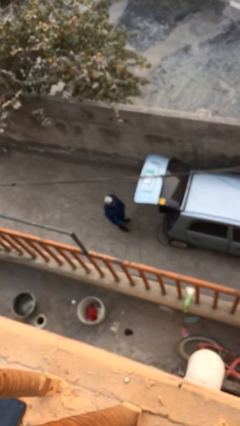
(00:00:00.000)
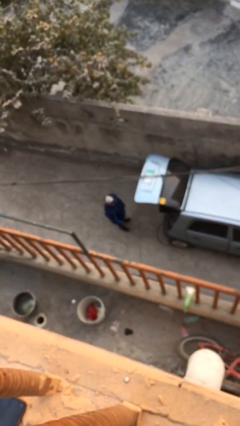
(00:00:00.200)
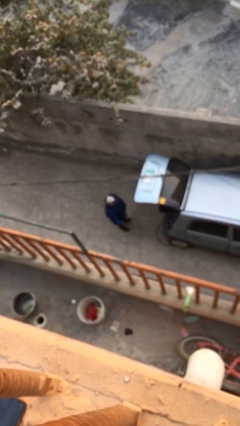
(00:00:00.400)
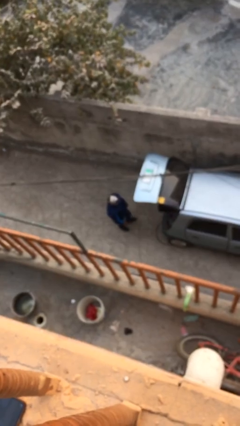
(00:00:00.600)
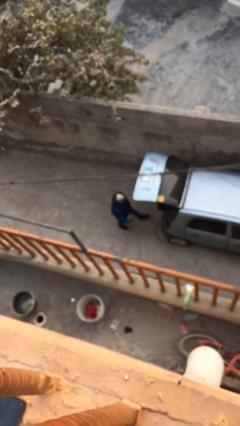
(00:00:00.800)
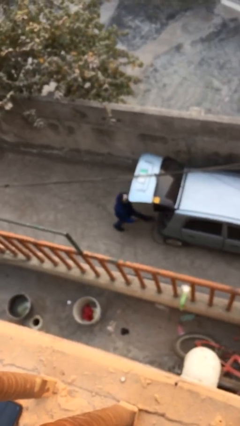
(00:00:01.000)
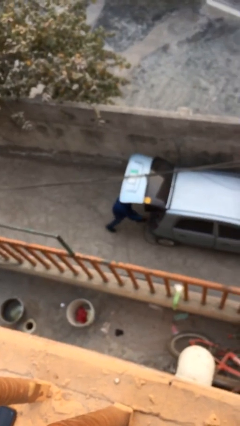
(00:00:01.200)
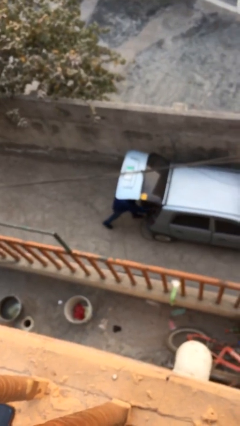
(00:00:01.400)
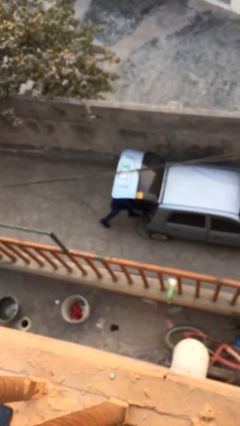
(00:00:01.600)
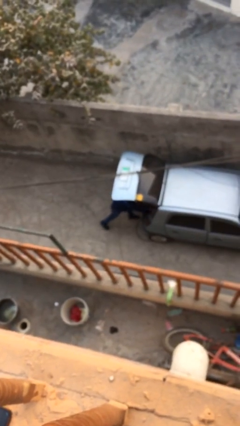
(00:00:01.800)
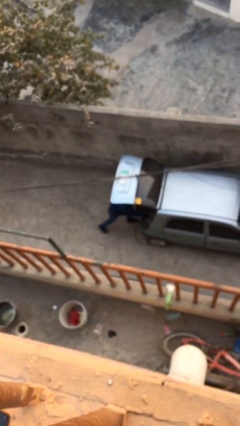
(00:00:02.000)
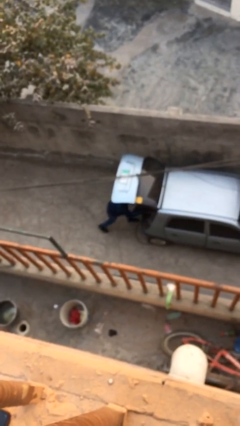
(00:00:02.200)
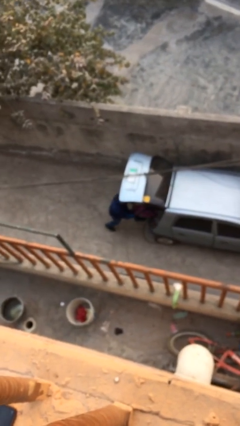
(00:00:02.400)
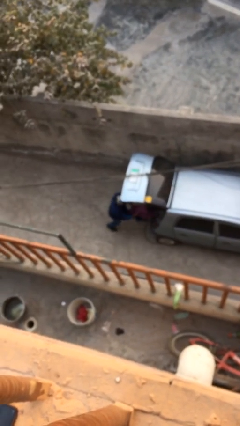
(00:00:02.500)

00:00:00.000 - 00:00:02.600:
person unloads car

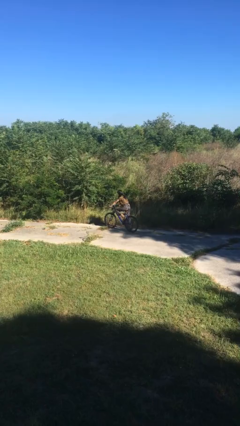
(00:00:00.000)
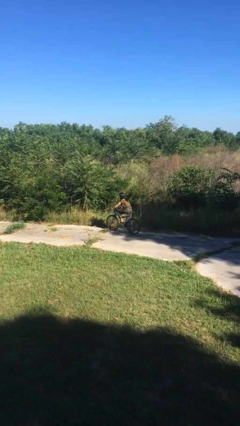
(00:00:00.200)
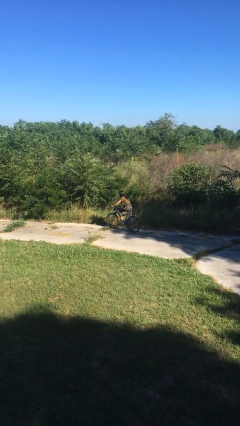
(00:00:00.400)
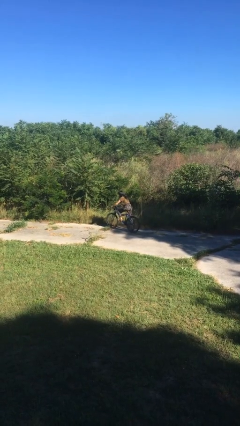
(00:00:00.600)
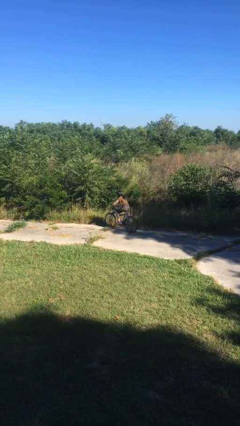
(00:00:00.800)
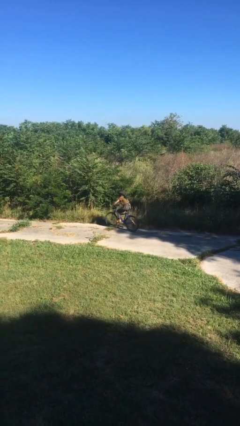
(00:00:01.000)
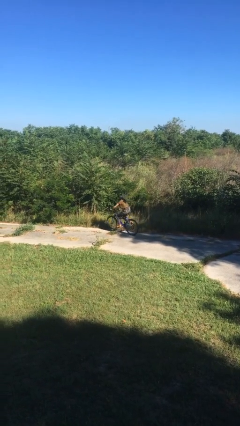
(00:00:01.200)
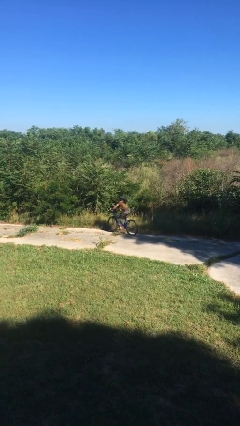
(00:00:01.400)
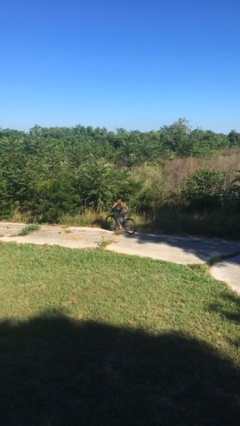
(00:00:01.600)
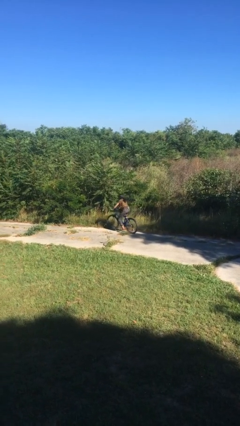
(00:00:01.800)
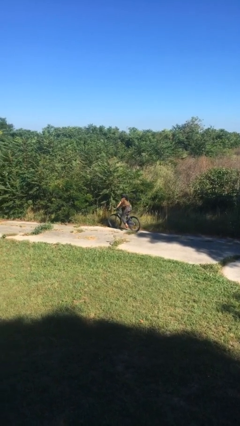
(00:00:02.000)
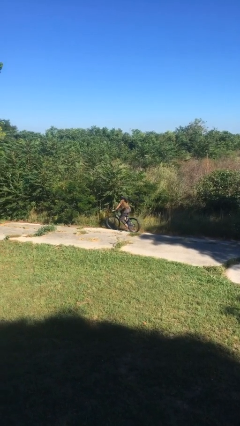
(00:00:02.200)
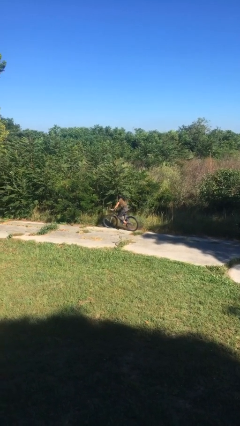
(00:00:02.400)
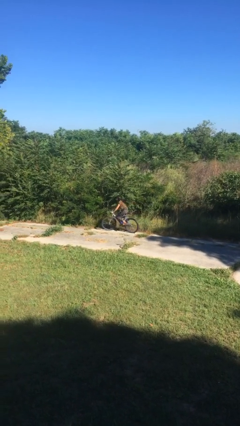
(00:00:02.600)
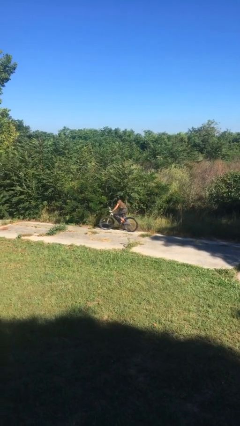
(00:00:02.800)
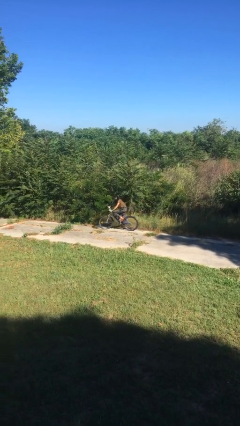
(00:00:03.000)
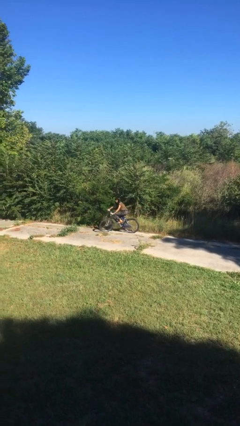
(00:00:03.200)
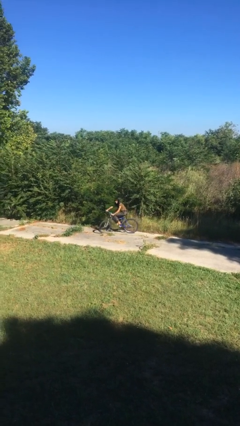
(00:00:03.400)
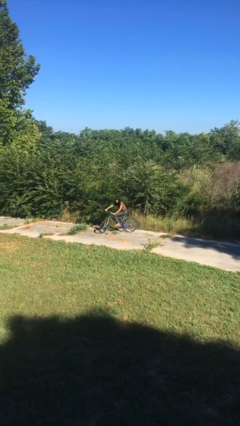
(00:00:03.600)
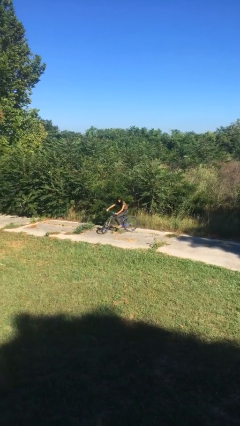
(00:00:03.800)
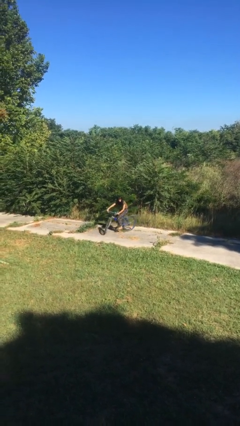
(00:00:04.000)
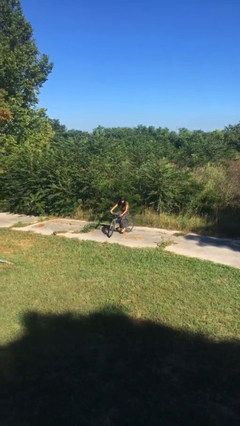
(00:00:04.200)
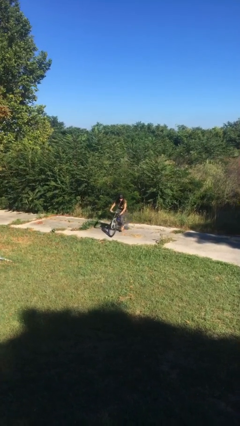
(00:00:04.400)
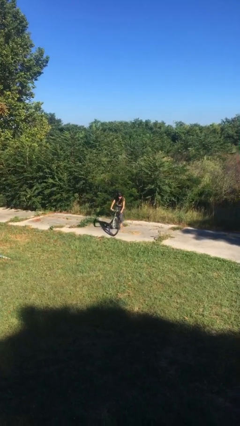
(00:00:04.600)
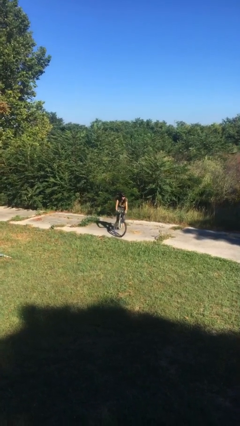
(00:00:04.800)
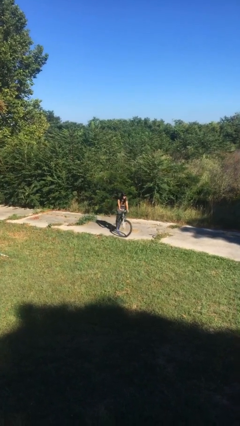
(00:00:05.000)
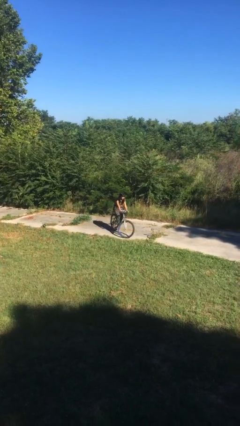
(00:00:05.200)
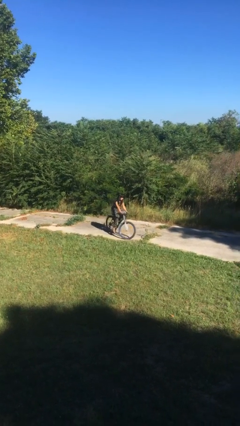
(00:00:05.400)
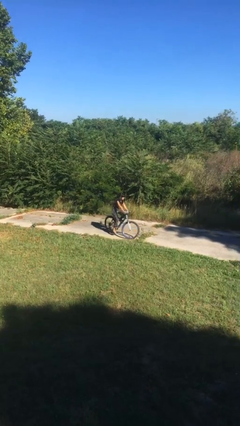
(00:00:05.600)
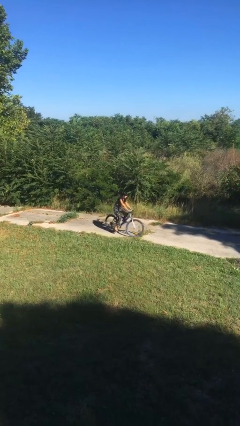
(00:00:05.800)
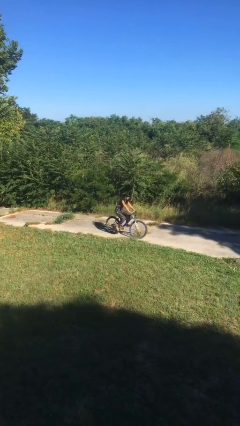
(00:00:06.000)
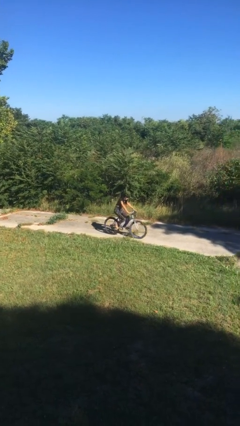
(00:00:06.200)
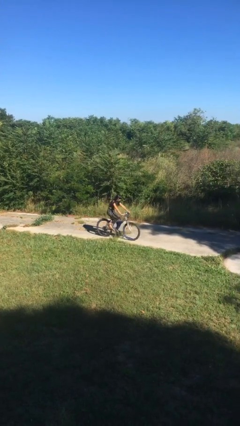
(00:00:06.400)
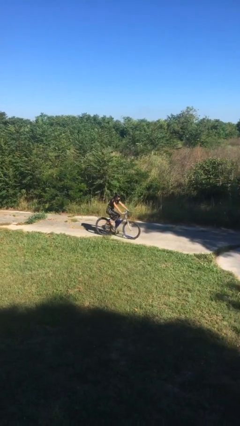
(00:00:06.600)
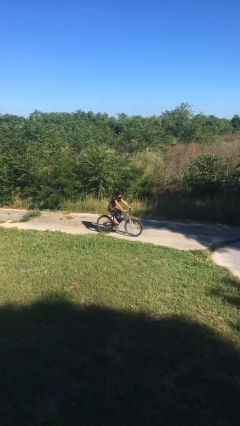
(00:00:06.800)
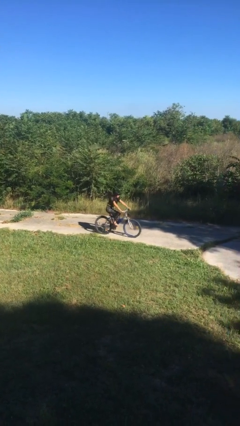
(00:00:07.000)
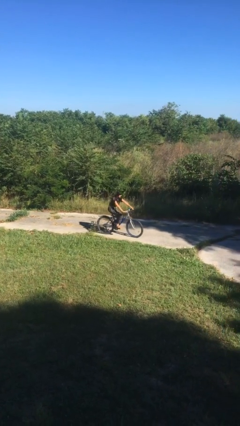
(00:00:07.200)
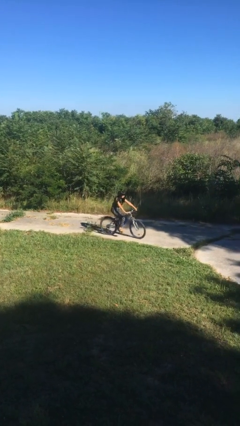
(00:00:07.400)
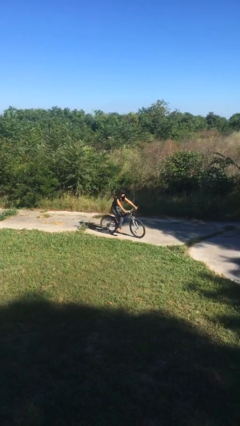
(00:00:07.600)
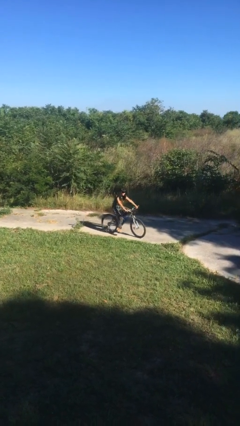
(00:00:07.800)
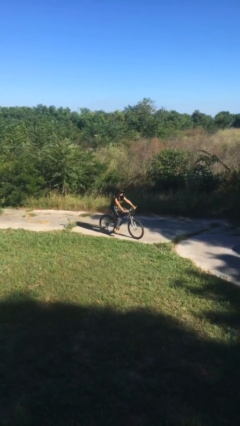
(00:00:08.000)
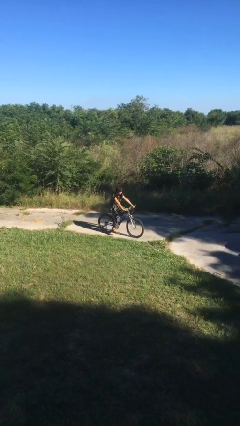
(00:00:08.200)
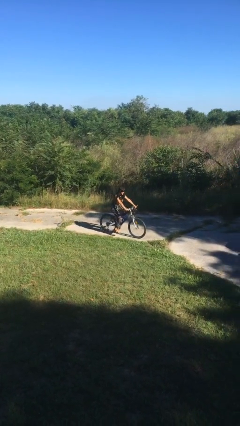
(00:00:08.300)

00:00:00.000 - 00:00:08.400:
person rides bicycle

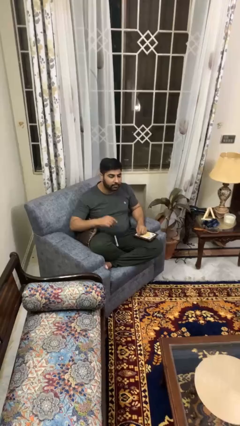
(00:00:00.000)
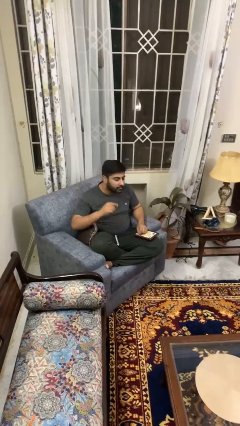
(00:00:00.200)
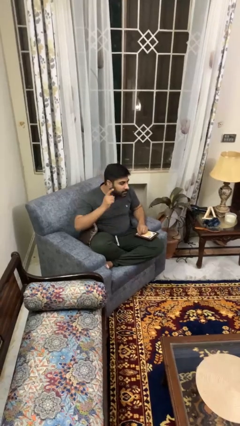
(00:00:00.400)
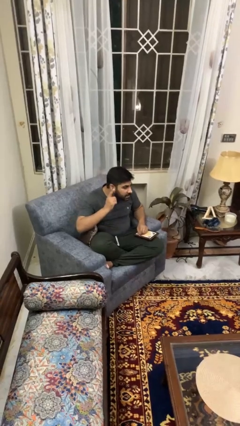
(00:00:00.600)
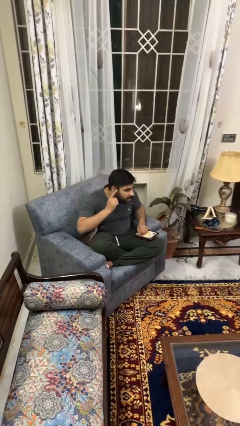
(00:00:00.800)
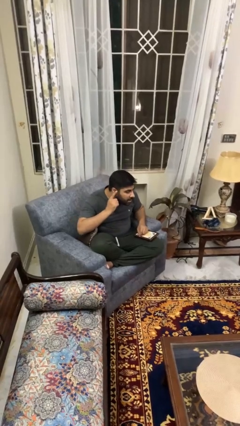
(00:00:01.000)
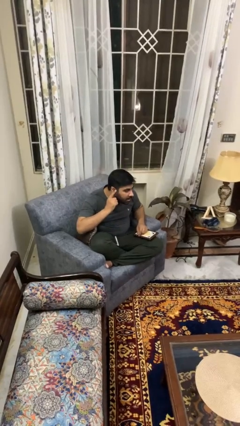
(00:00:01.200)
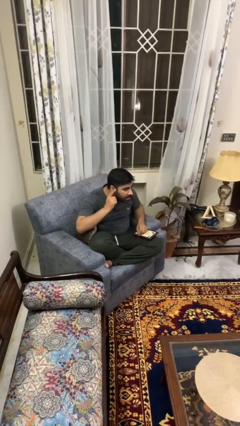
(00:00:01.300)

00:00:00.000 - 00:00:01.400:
person gestures listen closely

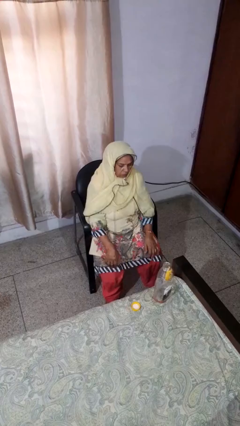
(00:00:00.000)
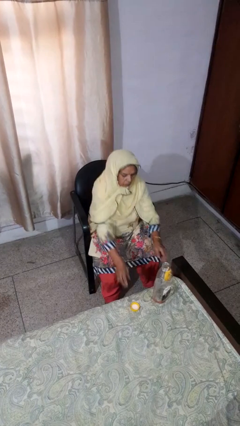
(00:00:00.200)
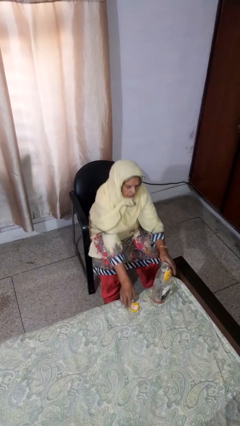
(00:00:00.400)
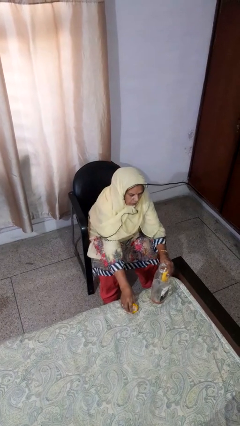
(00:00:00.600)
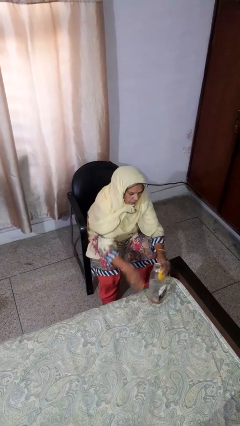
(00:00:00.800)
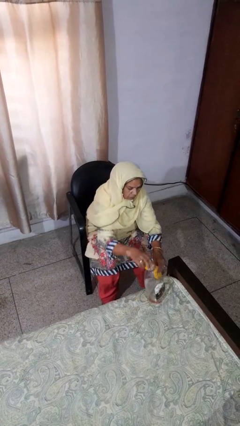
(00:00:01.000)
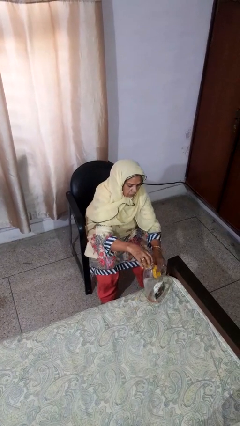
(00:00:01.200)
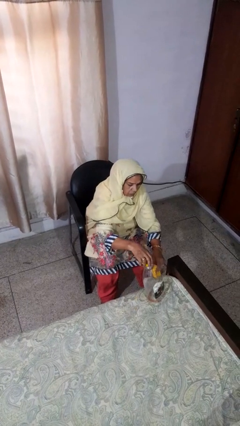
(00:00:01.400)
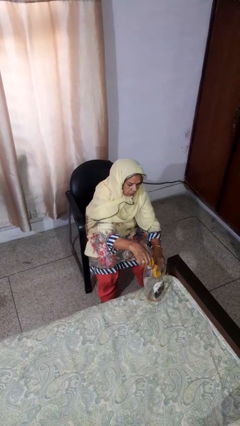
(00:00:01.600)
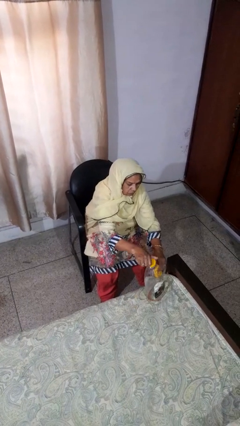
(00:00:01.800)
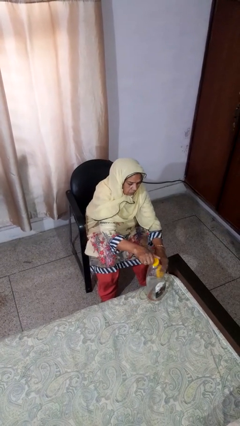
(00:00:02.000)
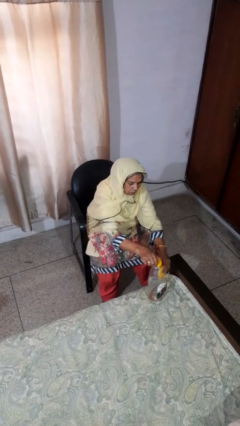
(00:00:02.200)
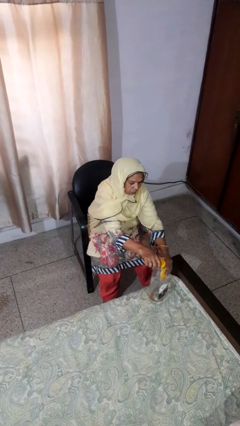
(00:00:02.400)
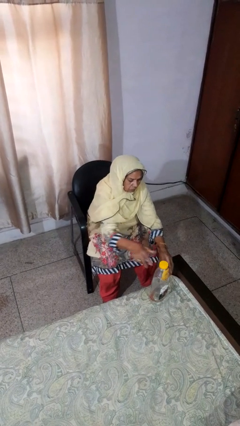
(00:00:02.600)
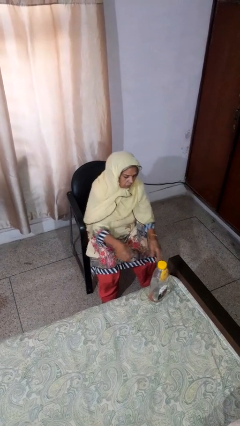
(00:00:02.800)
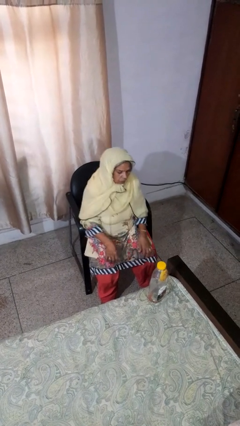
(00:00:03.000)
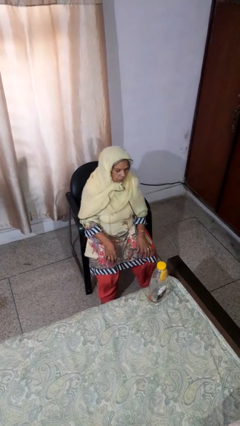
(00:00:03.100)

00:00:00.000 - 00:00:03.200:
person screws lid to bottle

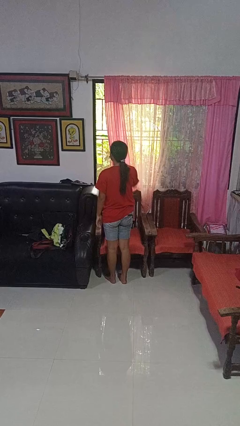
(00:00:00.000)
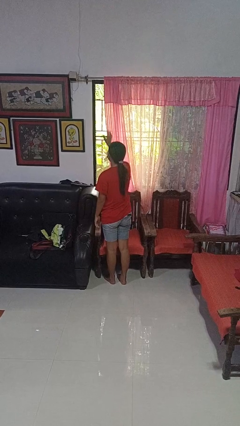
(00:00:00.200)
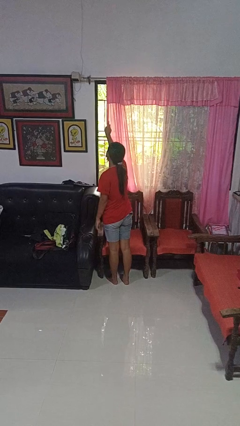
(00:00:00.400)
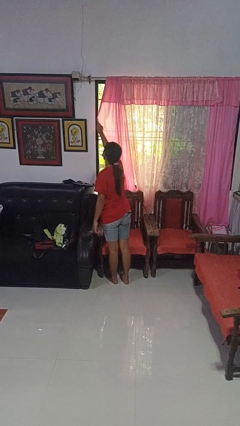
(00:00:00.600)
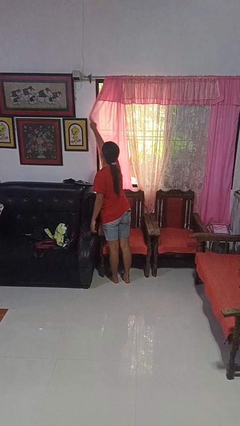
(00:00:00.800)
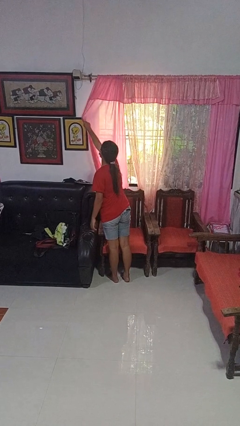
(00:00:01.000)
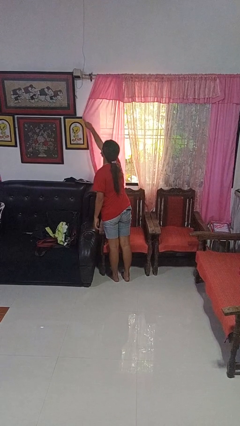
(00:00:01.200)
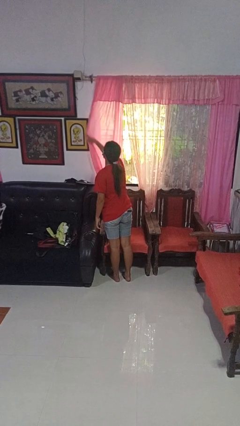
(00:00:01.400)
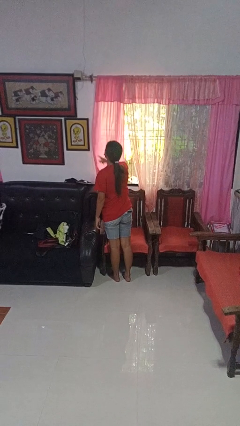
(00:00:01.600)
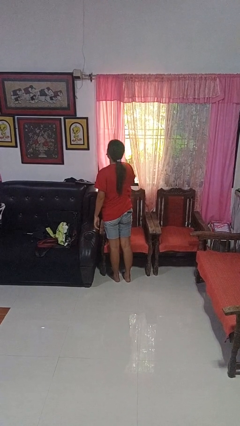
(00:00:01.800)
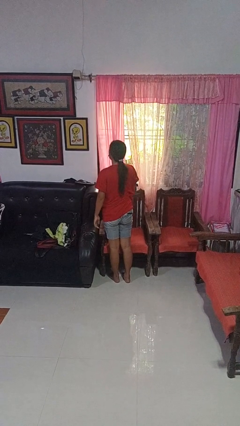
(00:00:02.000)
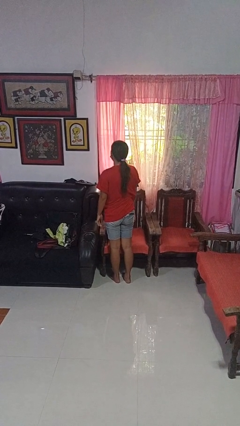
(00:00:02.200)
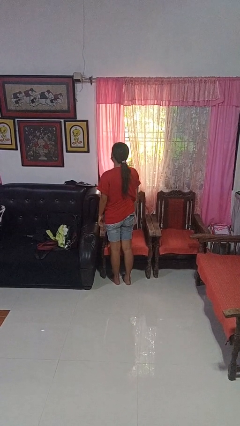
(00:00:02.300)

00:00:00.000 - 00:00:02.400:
person closes curtains
